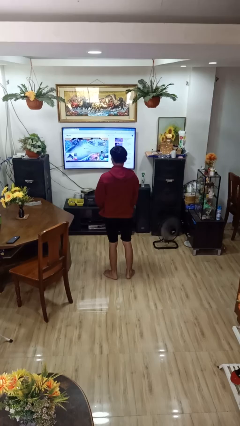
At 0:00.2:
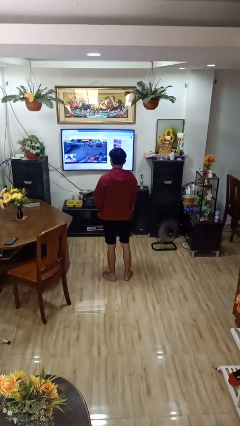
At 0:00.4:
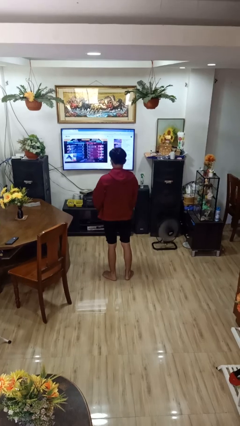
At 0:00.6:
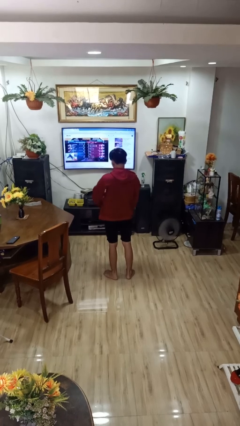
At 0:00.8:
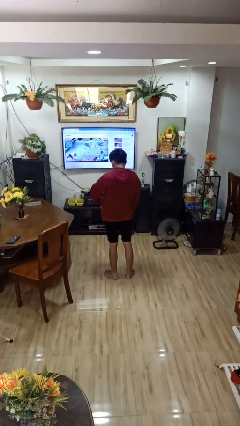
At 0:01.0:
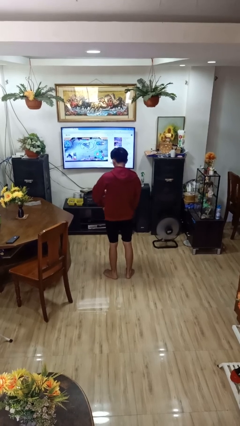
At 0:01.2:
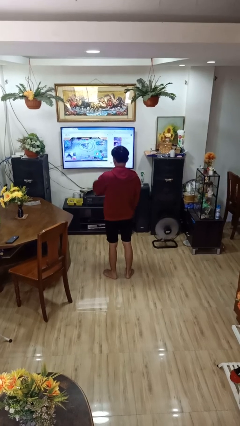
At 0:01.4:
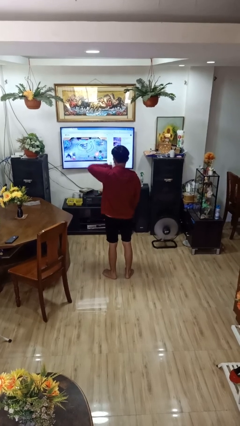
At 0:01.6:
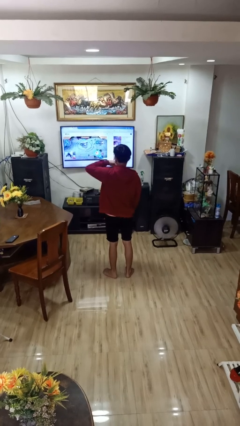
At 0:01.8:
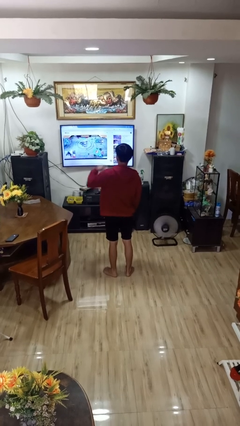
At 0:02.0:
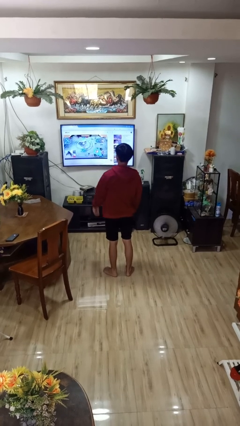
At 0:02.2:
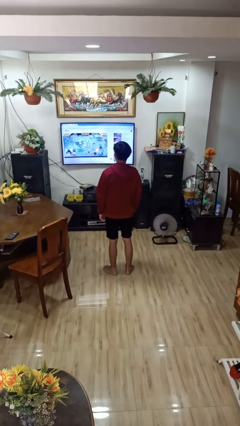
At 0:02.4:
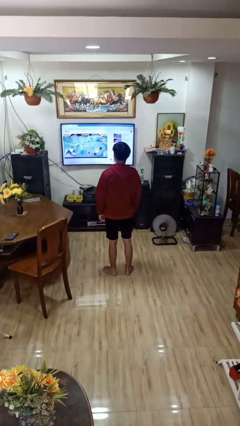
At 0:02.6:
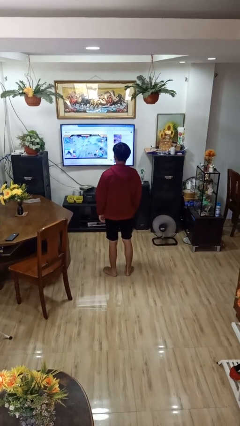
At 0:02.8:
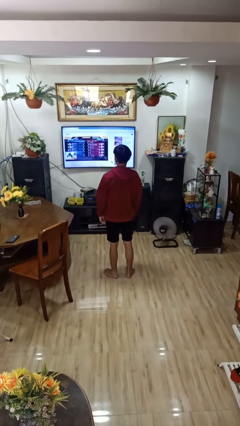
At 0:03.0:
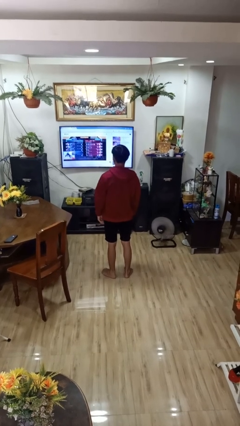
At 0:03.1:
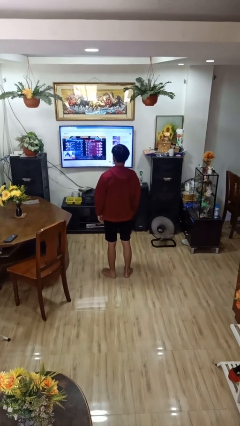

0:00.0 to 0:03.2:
person zips up jacket

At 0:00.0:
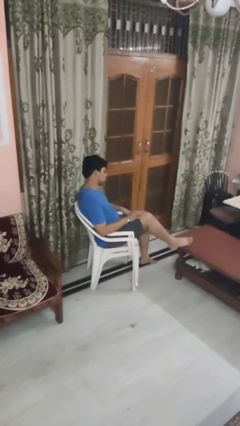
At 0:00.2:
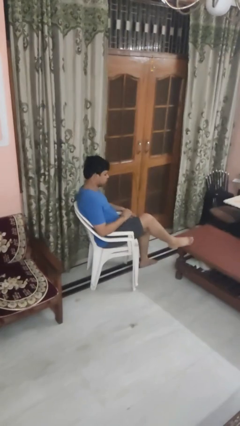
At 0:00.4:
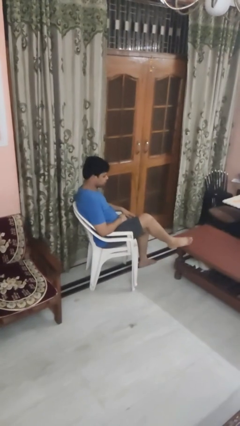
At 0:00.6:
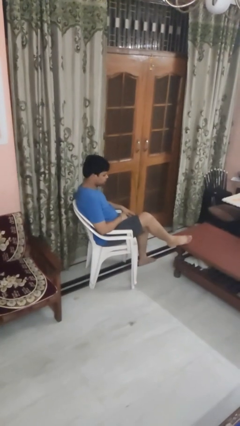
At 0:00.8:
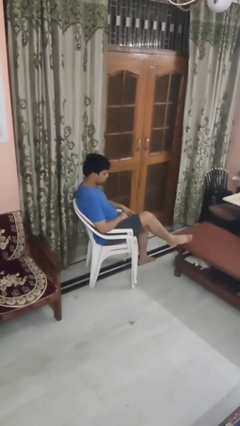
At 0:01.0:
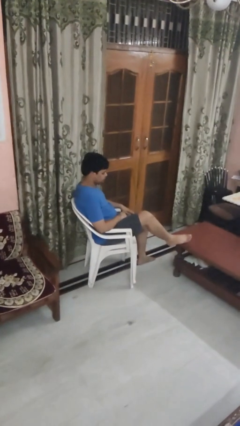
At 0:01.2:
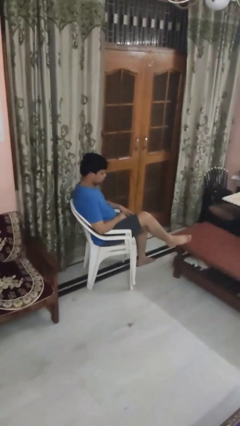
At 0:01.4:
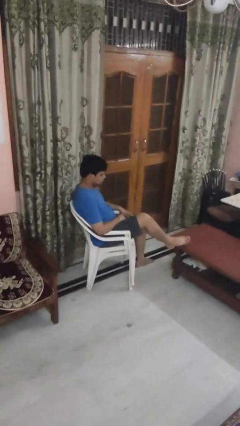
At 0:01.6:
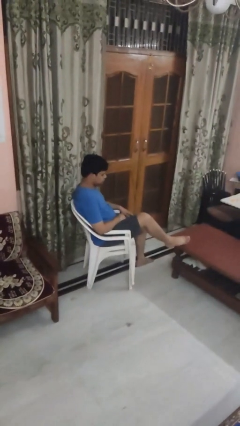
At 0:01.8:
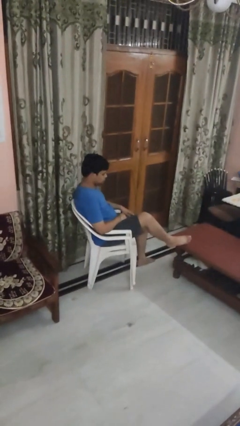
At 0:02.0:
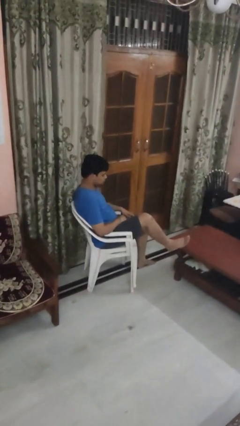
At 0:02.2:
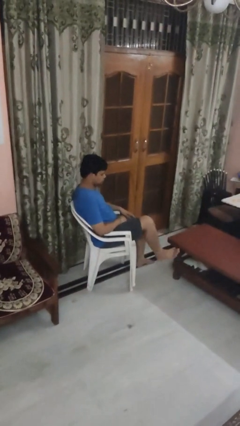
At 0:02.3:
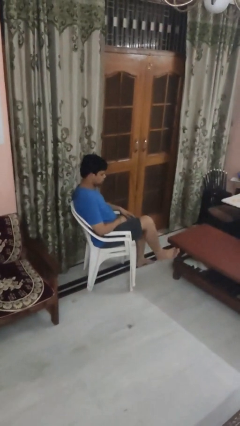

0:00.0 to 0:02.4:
person puts feet up

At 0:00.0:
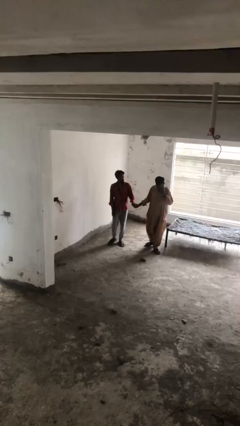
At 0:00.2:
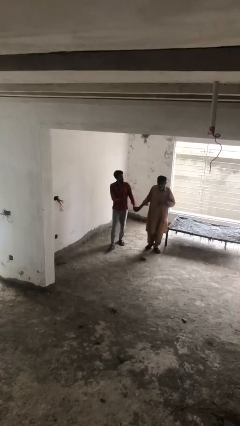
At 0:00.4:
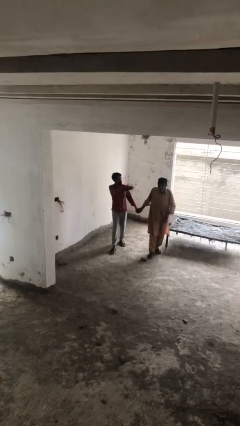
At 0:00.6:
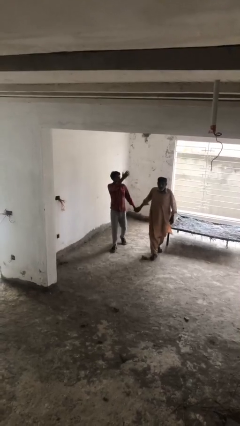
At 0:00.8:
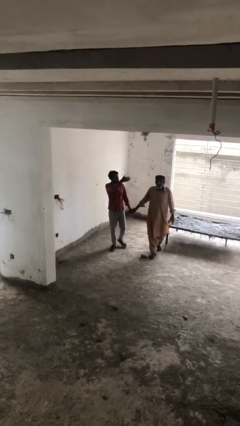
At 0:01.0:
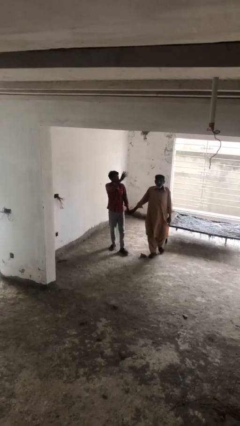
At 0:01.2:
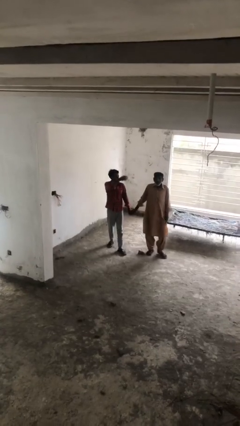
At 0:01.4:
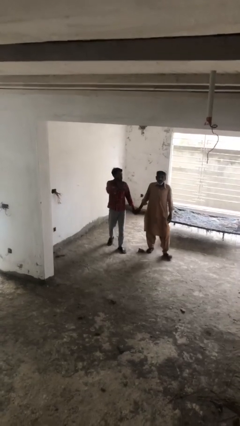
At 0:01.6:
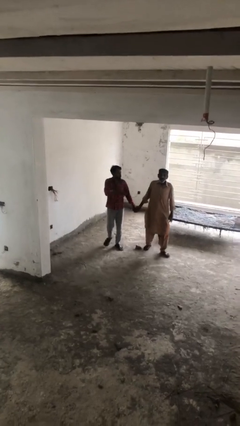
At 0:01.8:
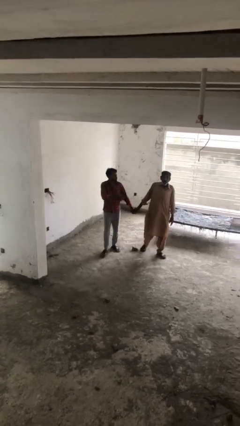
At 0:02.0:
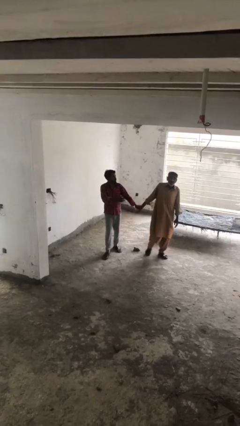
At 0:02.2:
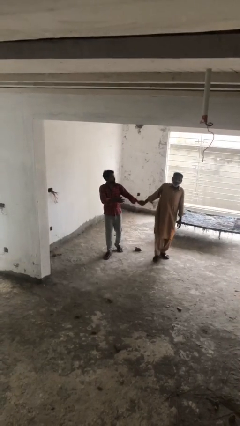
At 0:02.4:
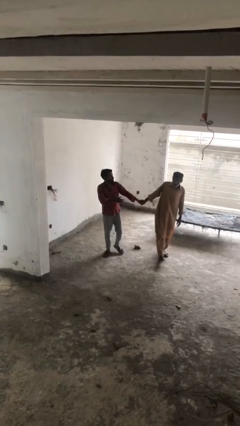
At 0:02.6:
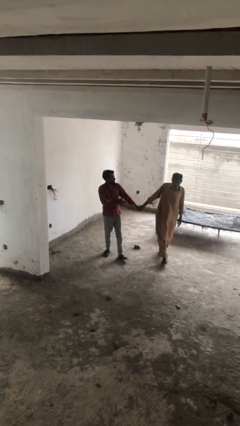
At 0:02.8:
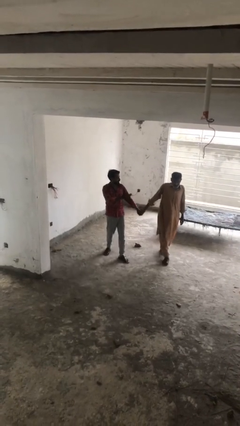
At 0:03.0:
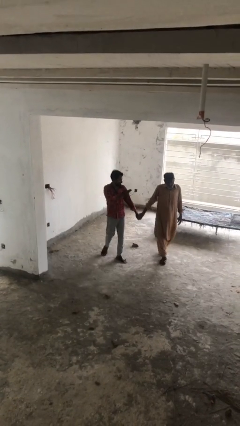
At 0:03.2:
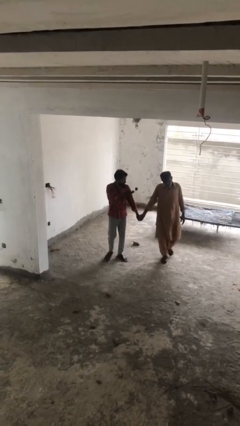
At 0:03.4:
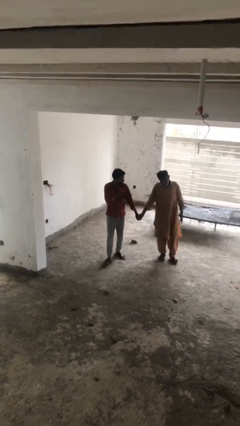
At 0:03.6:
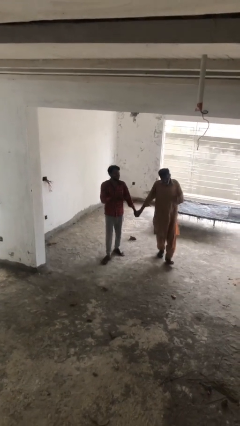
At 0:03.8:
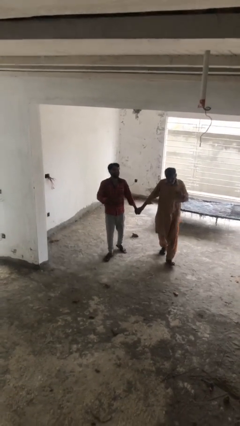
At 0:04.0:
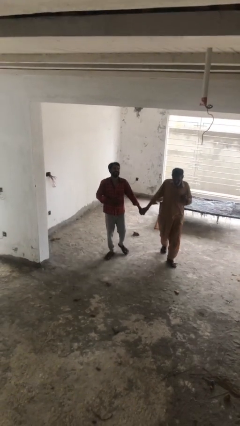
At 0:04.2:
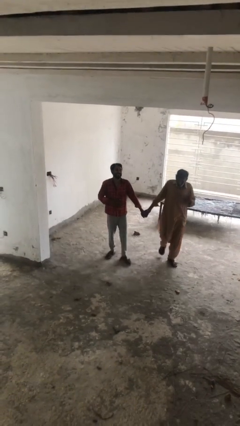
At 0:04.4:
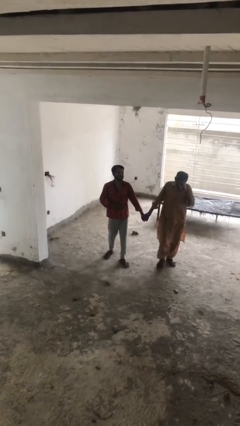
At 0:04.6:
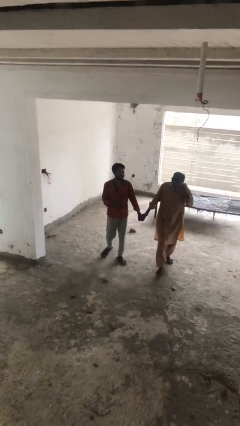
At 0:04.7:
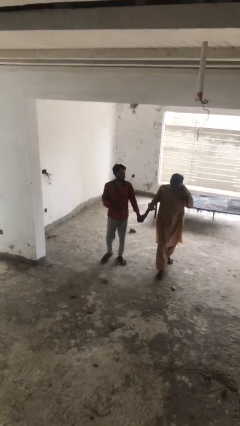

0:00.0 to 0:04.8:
person holds hand

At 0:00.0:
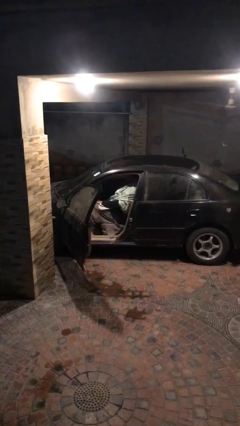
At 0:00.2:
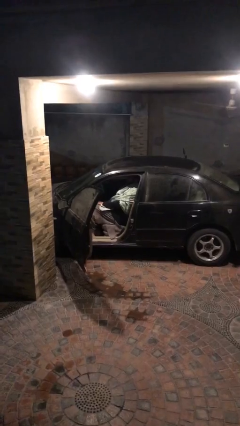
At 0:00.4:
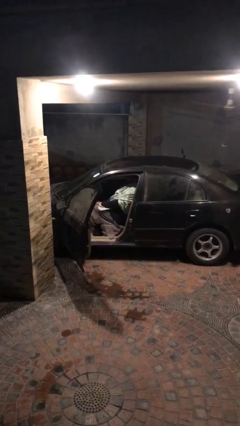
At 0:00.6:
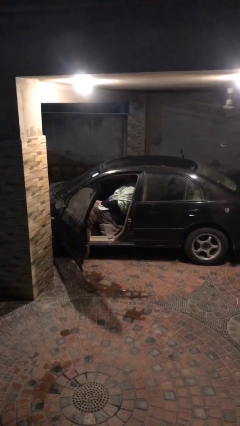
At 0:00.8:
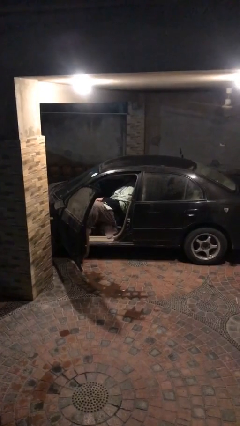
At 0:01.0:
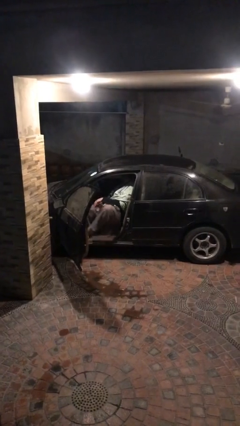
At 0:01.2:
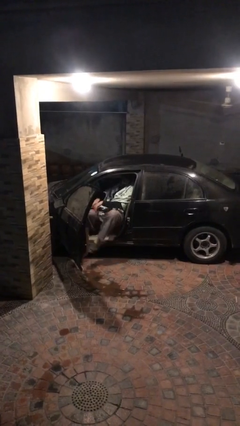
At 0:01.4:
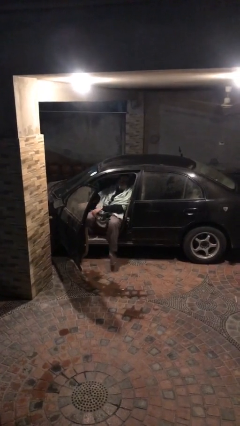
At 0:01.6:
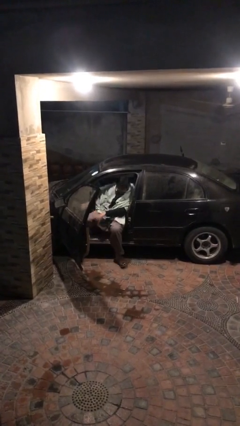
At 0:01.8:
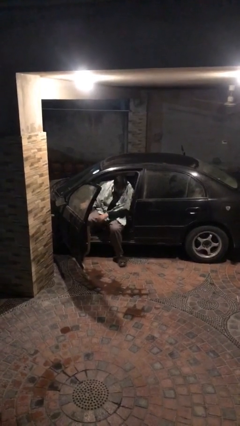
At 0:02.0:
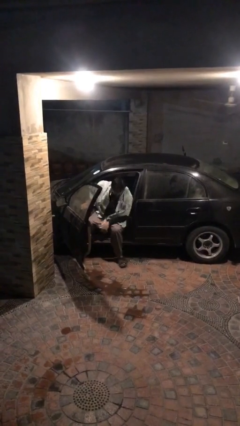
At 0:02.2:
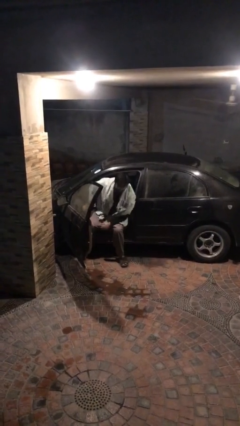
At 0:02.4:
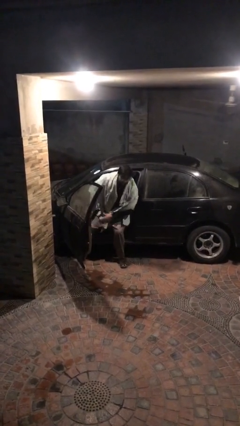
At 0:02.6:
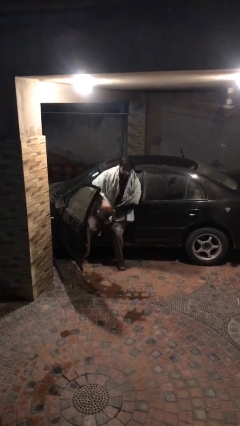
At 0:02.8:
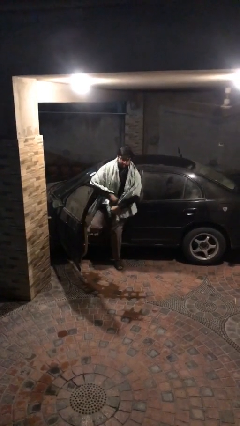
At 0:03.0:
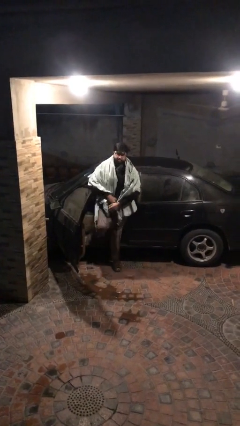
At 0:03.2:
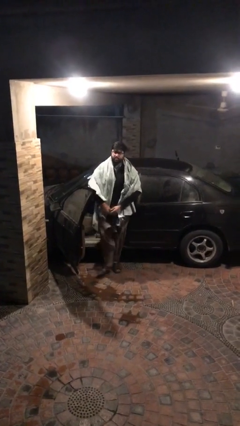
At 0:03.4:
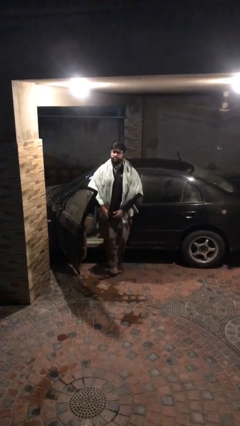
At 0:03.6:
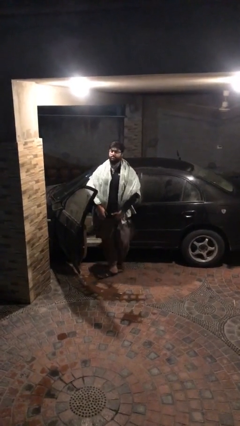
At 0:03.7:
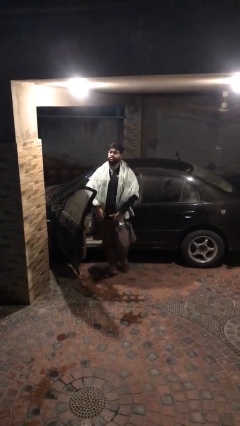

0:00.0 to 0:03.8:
person exits car

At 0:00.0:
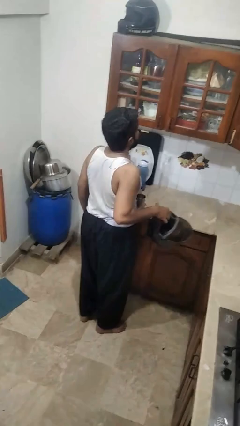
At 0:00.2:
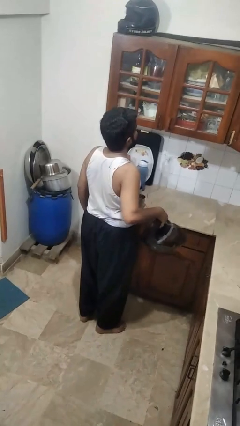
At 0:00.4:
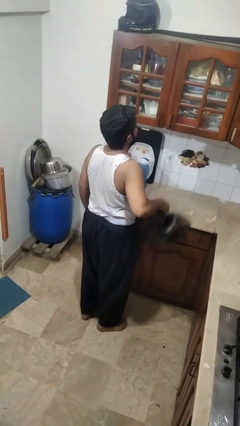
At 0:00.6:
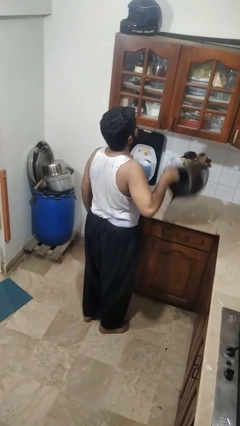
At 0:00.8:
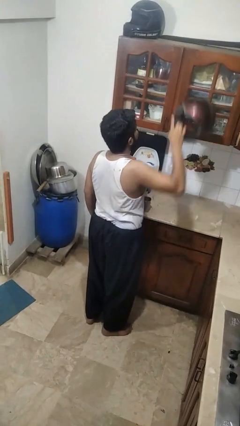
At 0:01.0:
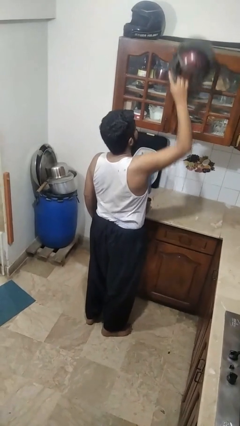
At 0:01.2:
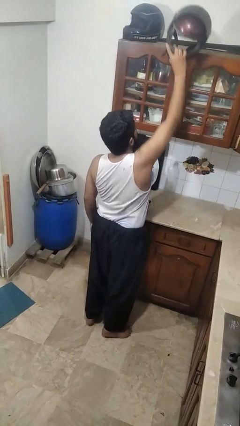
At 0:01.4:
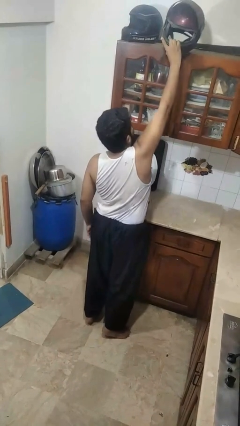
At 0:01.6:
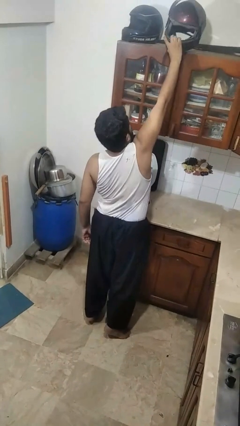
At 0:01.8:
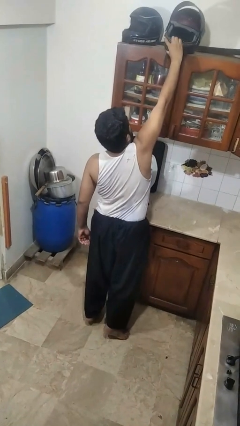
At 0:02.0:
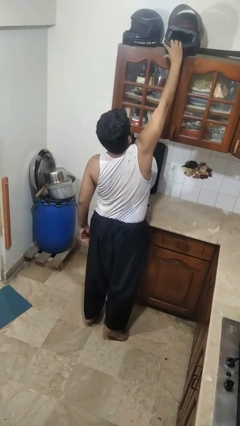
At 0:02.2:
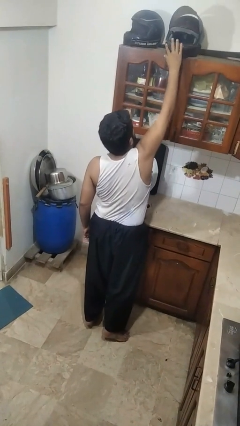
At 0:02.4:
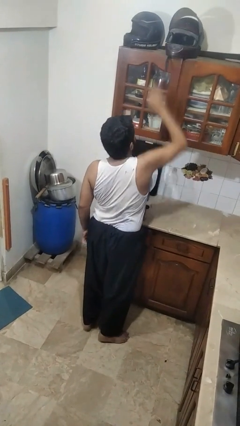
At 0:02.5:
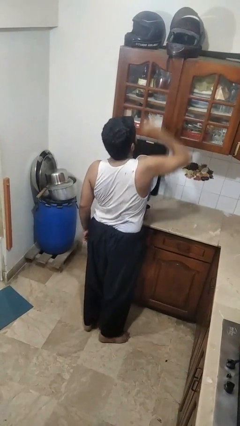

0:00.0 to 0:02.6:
person puts down object on shelf

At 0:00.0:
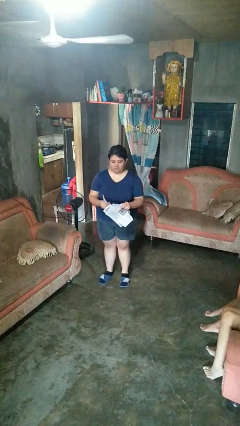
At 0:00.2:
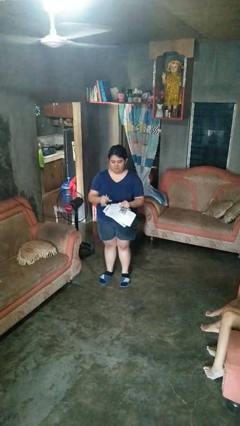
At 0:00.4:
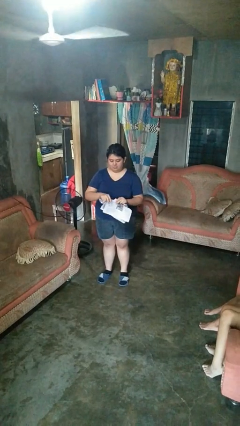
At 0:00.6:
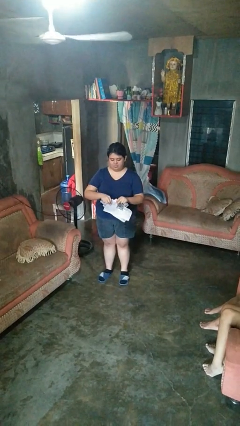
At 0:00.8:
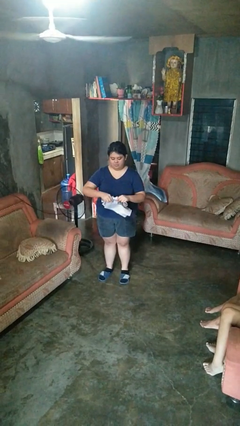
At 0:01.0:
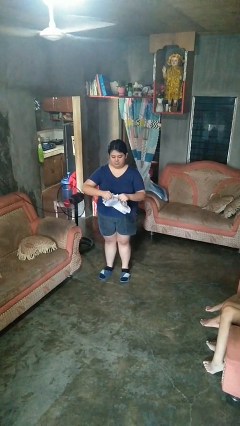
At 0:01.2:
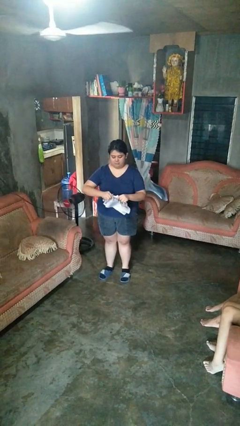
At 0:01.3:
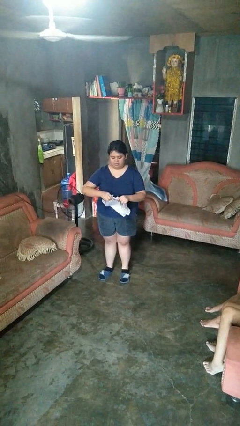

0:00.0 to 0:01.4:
person tears paper
